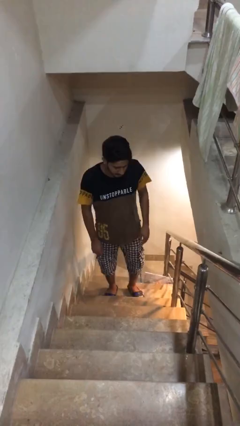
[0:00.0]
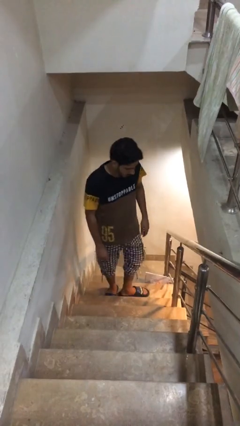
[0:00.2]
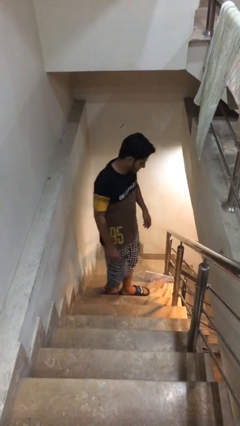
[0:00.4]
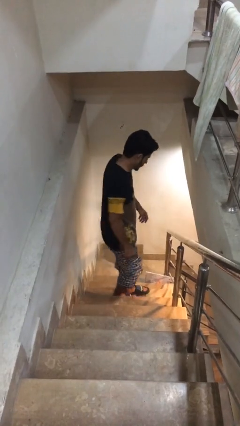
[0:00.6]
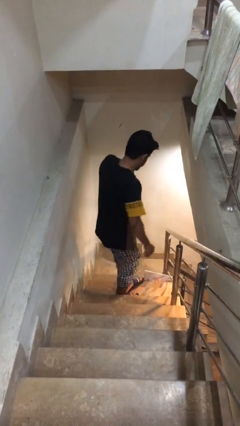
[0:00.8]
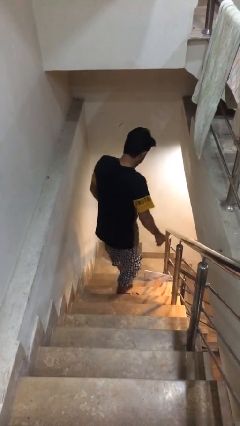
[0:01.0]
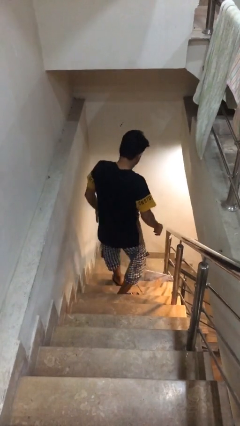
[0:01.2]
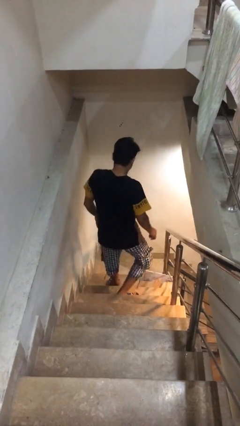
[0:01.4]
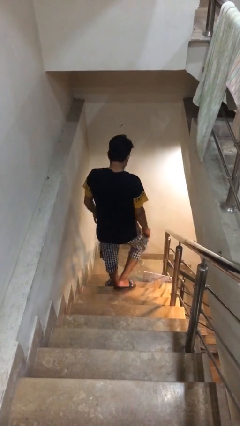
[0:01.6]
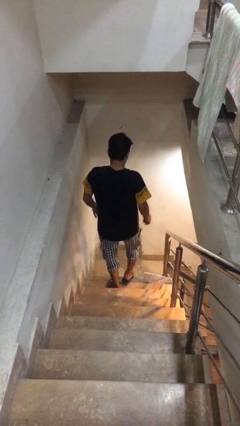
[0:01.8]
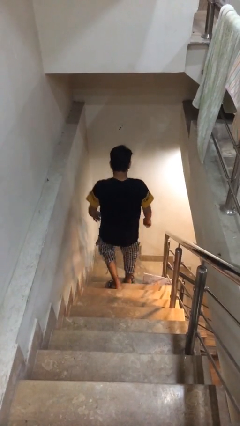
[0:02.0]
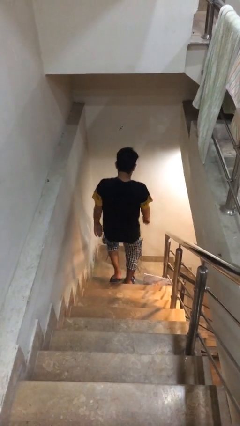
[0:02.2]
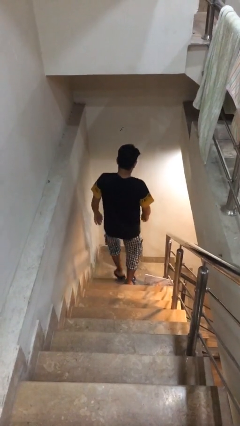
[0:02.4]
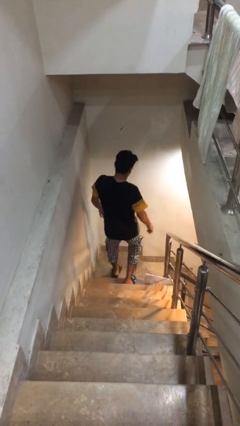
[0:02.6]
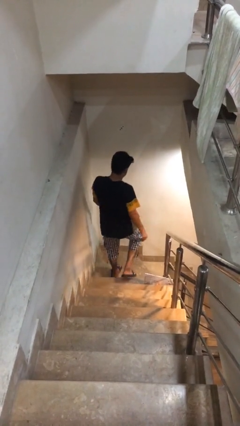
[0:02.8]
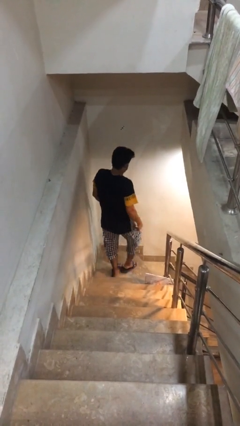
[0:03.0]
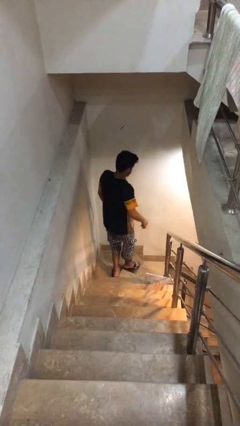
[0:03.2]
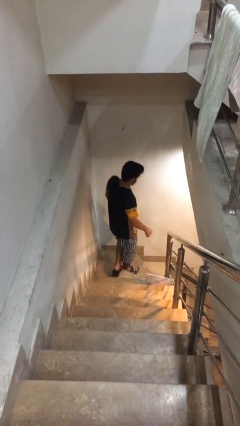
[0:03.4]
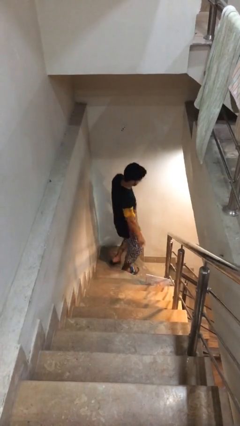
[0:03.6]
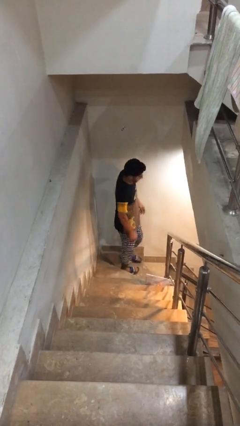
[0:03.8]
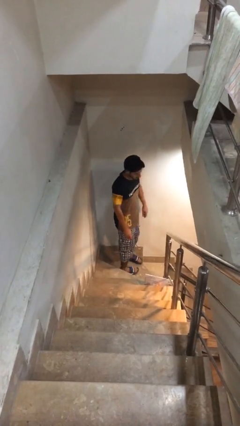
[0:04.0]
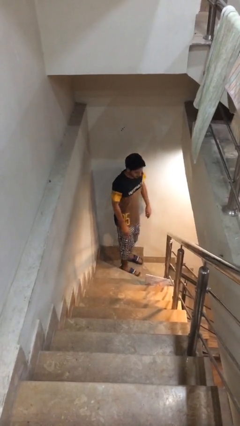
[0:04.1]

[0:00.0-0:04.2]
person climbs down stairs

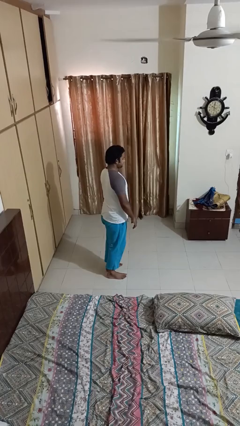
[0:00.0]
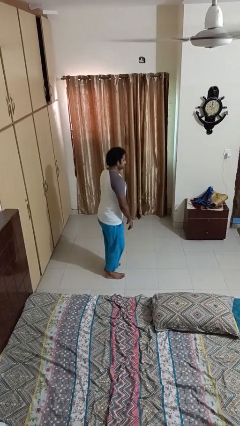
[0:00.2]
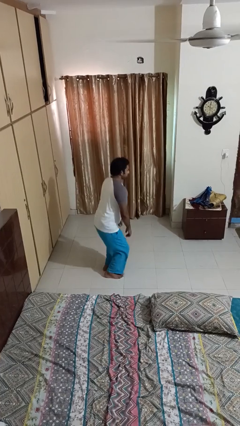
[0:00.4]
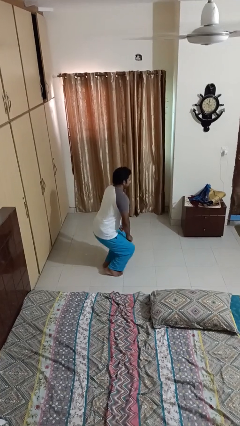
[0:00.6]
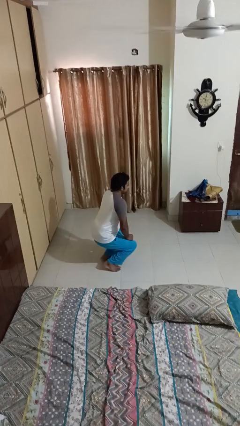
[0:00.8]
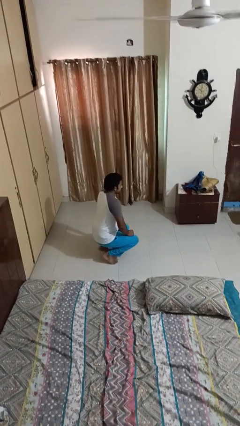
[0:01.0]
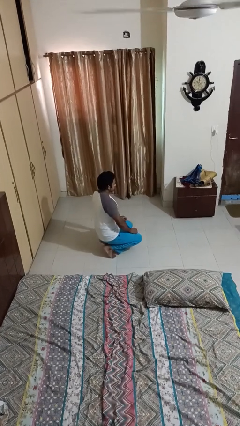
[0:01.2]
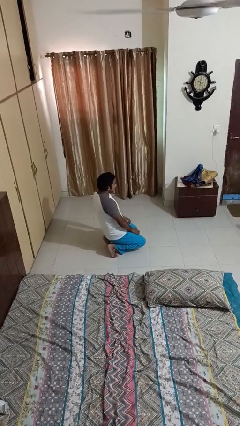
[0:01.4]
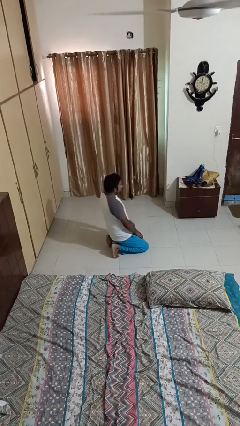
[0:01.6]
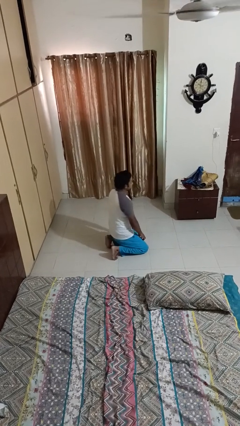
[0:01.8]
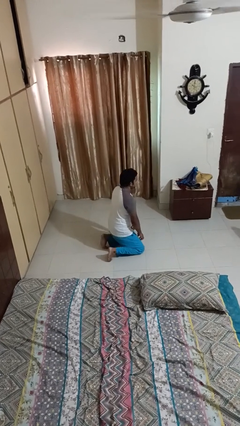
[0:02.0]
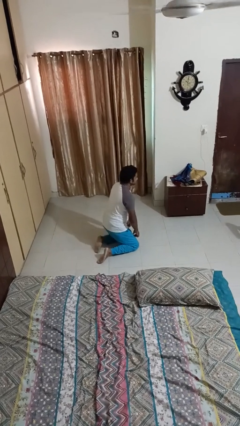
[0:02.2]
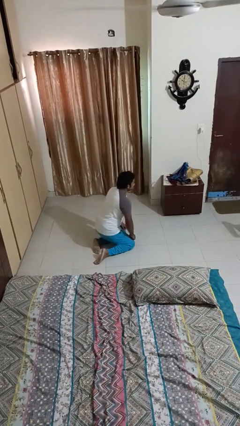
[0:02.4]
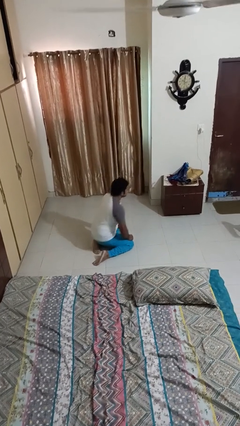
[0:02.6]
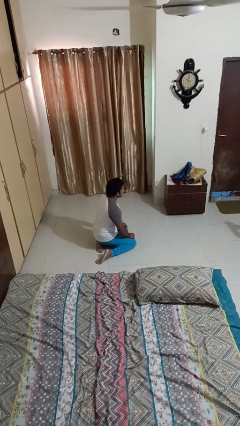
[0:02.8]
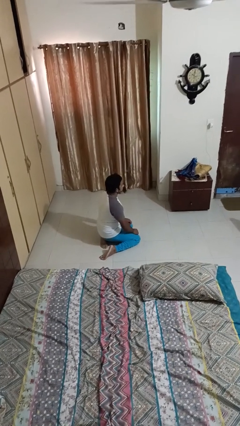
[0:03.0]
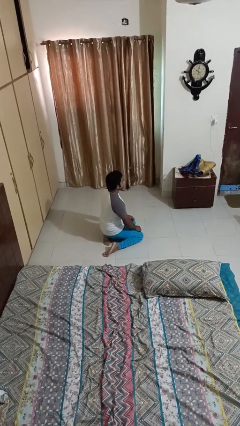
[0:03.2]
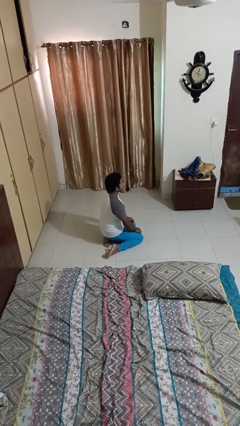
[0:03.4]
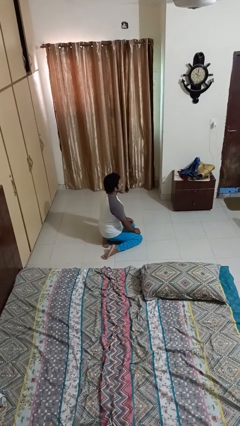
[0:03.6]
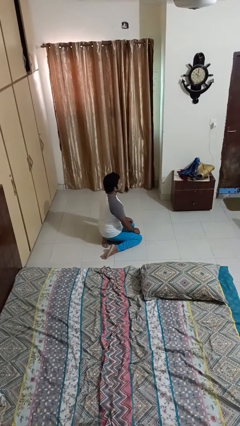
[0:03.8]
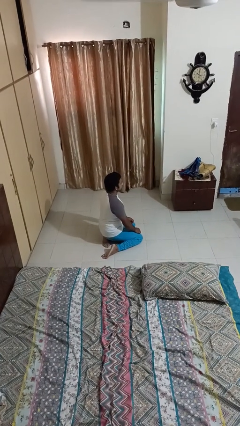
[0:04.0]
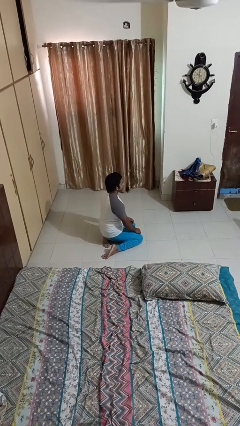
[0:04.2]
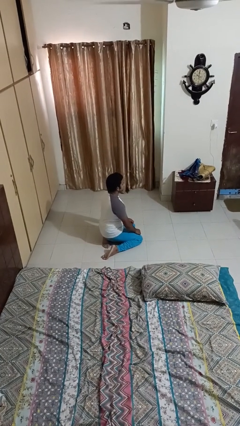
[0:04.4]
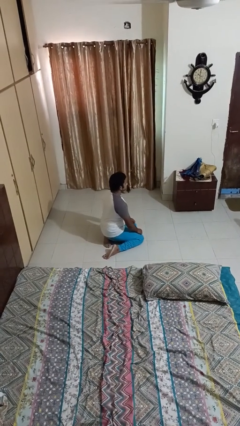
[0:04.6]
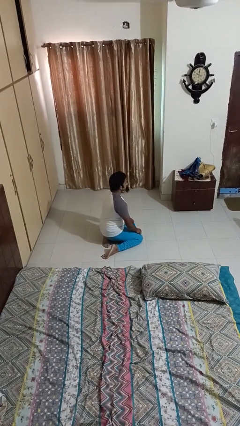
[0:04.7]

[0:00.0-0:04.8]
person kneels

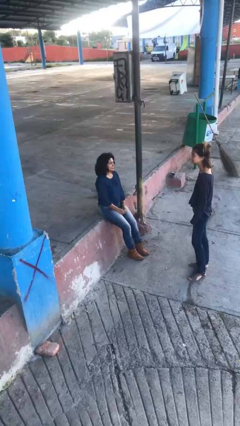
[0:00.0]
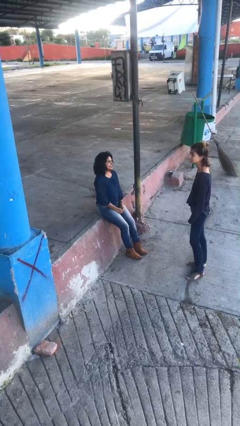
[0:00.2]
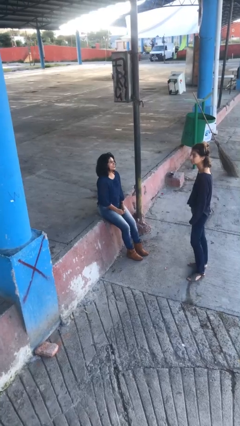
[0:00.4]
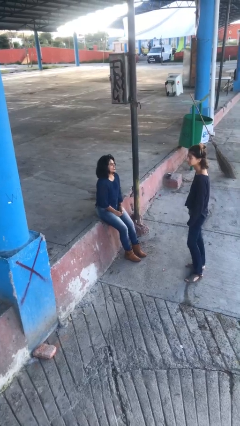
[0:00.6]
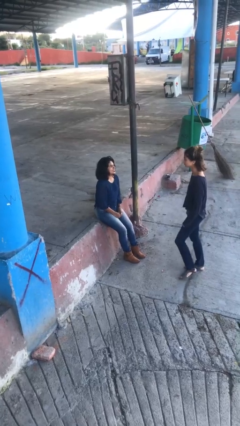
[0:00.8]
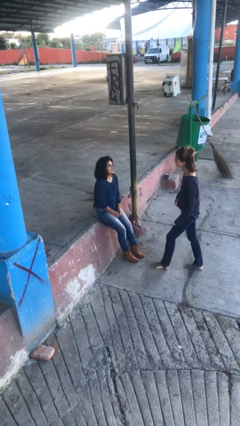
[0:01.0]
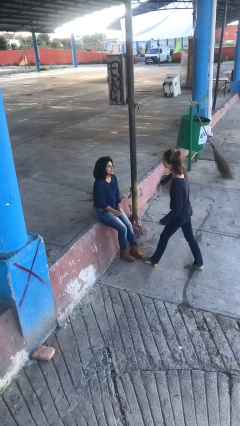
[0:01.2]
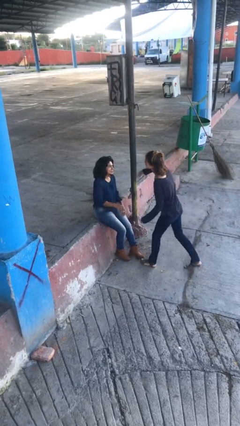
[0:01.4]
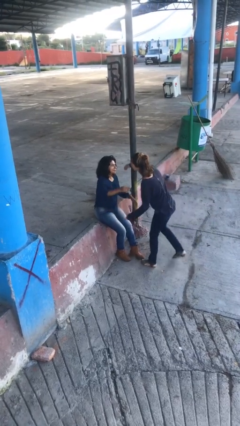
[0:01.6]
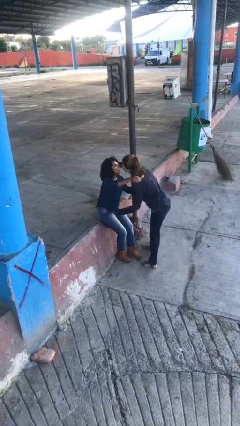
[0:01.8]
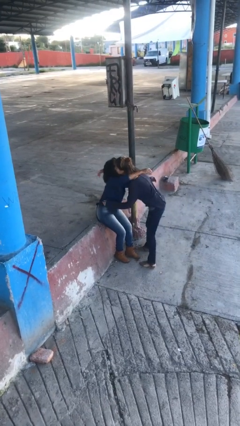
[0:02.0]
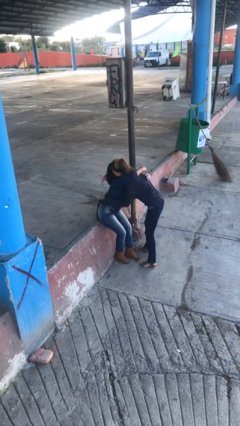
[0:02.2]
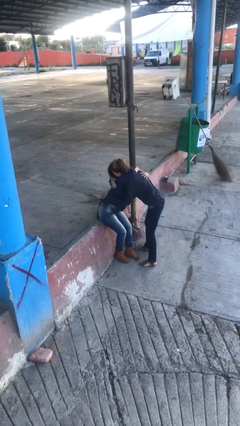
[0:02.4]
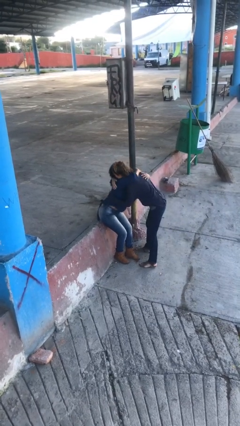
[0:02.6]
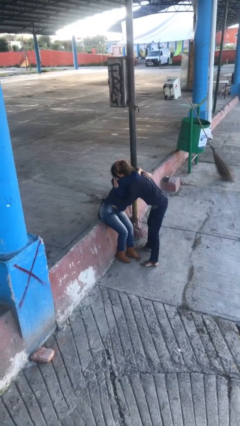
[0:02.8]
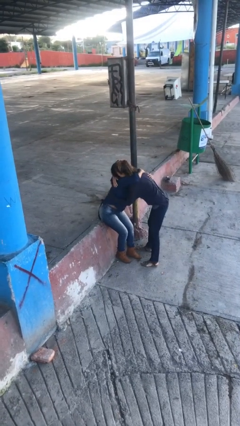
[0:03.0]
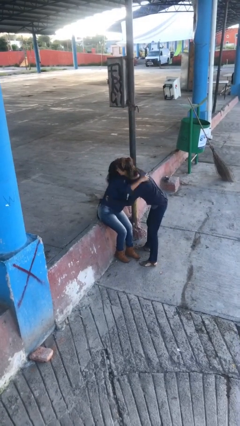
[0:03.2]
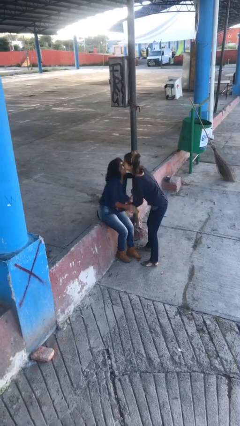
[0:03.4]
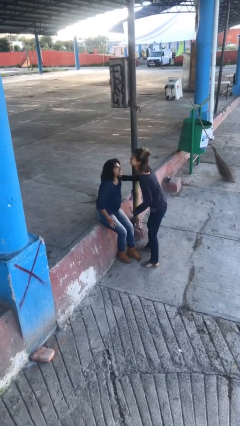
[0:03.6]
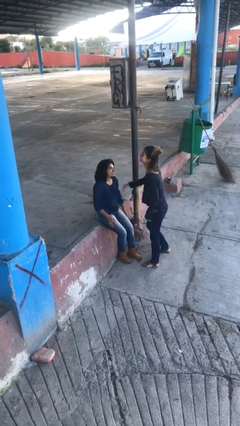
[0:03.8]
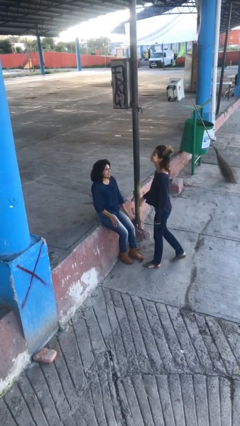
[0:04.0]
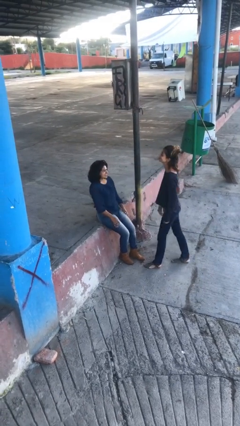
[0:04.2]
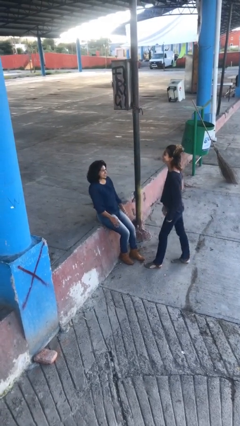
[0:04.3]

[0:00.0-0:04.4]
person embraces person

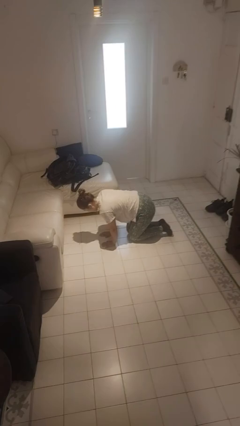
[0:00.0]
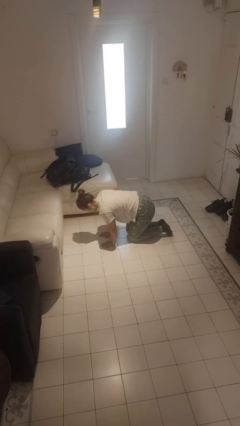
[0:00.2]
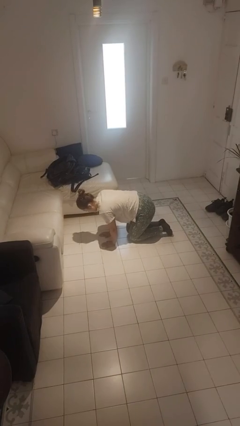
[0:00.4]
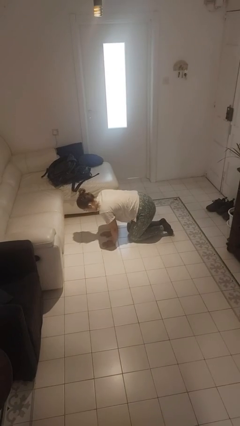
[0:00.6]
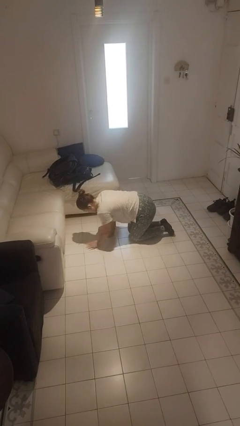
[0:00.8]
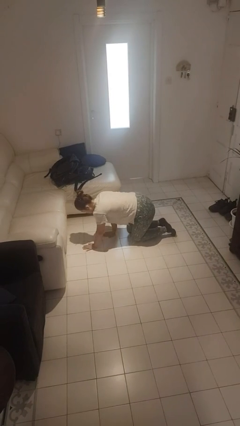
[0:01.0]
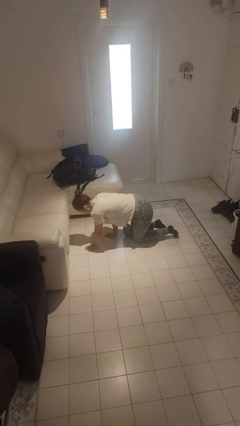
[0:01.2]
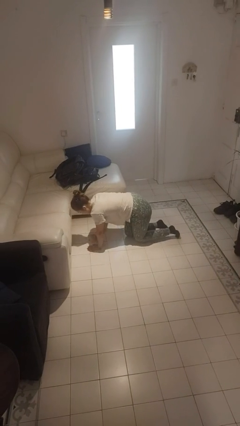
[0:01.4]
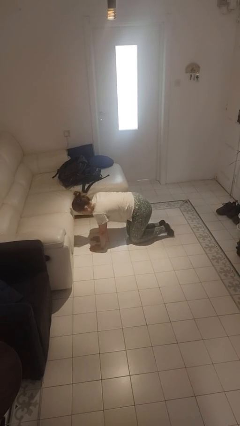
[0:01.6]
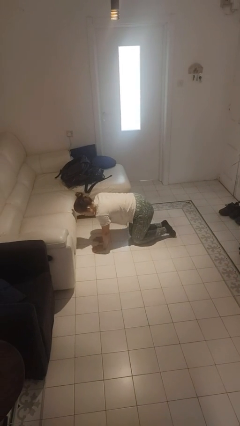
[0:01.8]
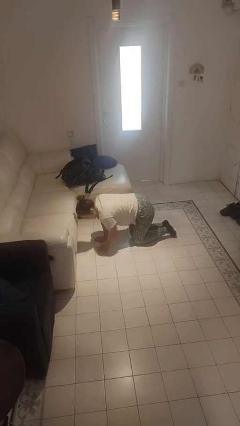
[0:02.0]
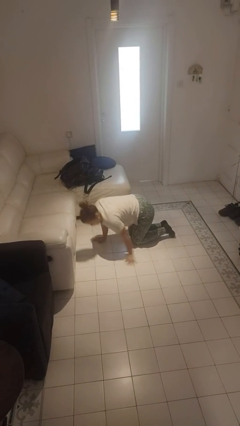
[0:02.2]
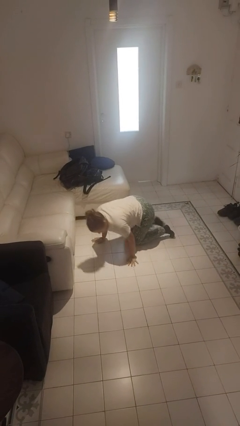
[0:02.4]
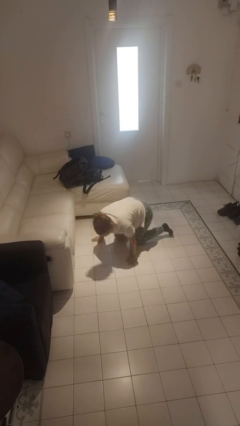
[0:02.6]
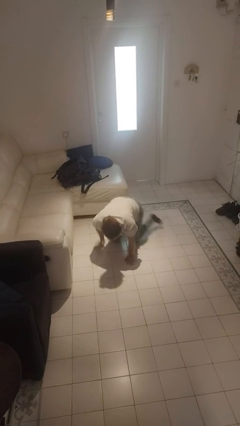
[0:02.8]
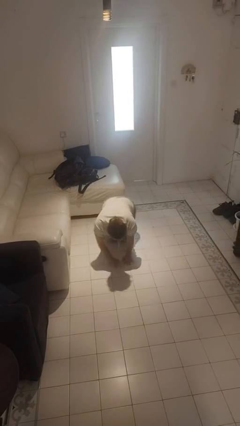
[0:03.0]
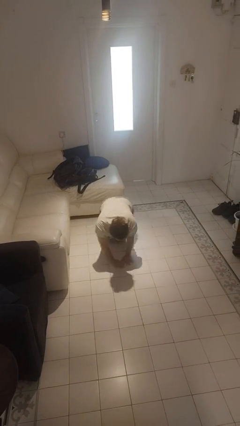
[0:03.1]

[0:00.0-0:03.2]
person crawls

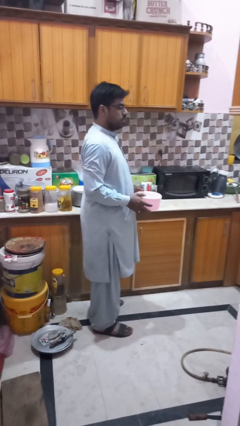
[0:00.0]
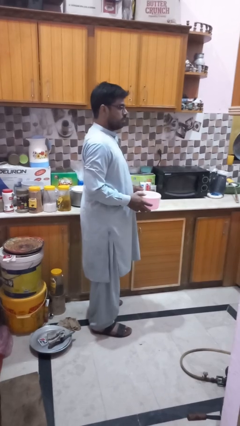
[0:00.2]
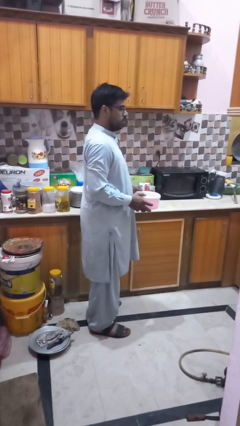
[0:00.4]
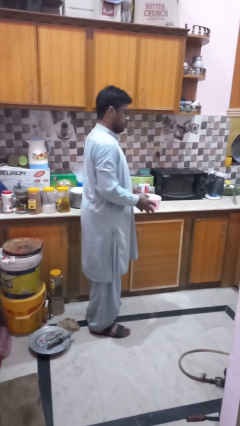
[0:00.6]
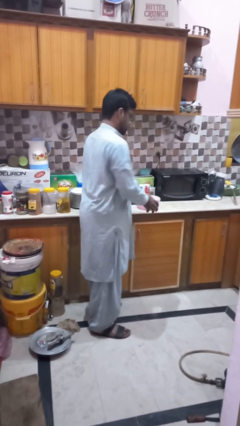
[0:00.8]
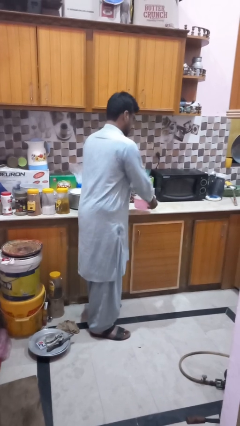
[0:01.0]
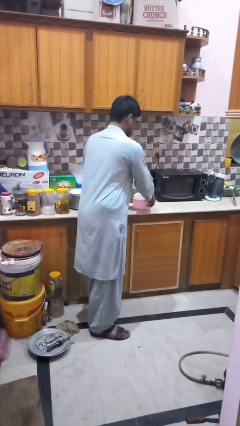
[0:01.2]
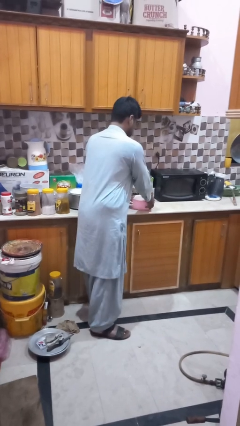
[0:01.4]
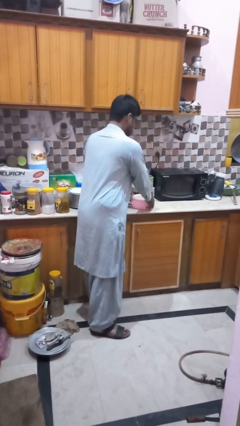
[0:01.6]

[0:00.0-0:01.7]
person puts down object on countertop
